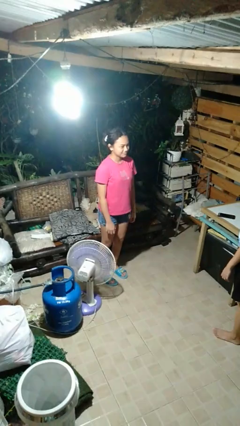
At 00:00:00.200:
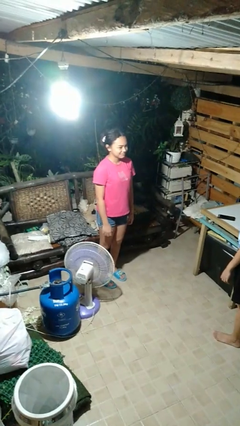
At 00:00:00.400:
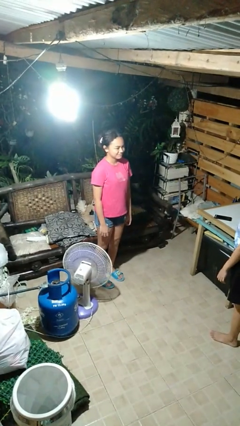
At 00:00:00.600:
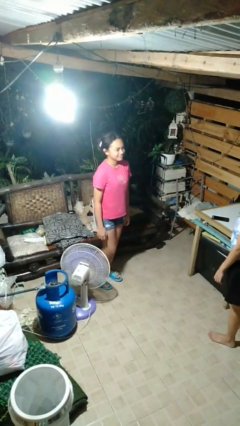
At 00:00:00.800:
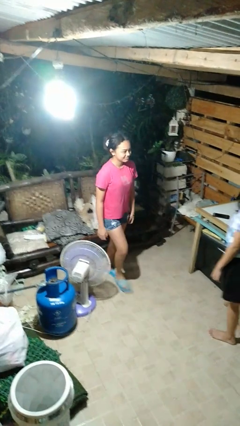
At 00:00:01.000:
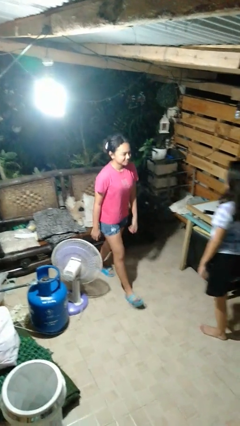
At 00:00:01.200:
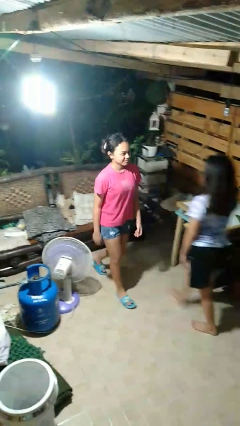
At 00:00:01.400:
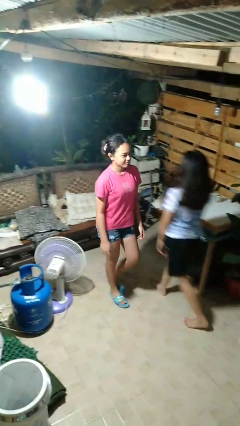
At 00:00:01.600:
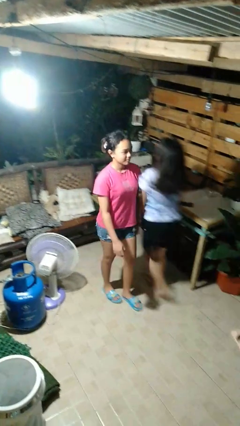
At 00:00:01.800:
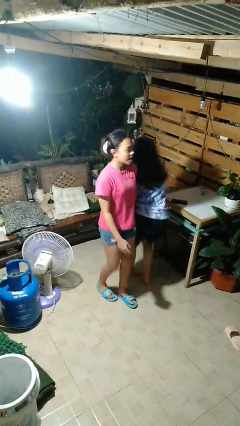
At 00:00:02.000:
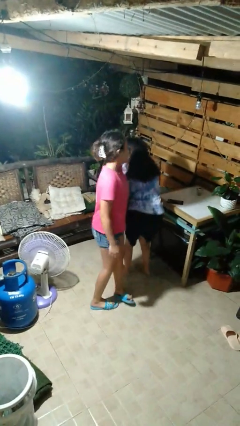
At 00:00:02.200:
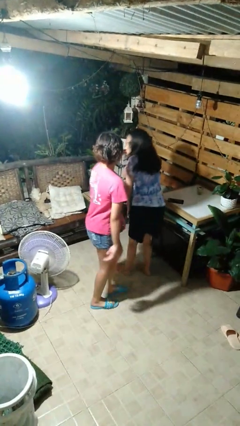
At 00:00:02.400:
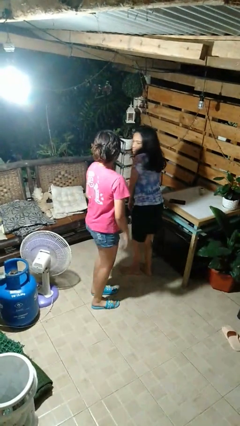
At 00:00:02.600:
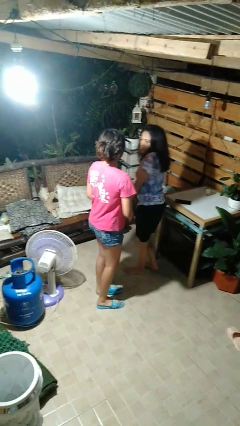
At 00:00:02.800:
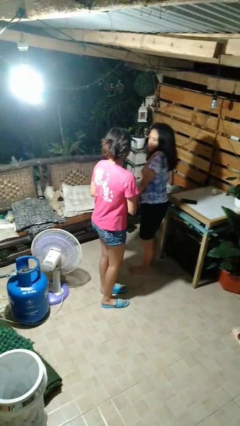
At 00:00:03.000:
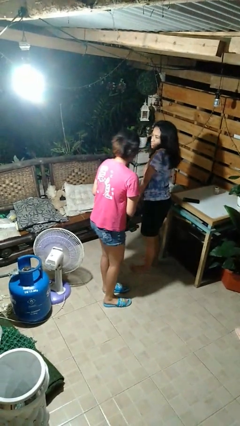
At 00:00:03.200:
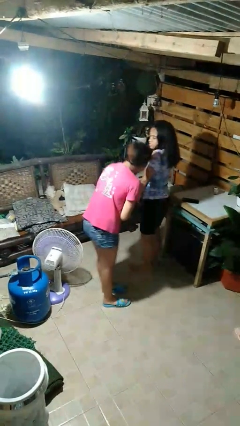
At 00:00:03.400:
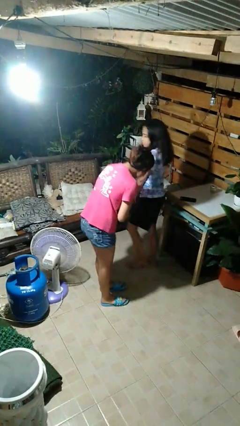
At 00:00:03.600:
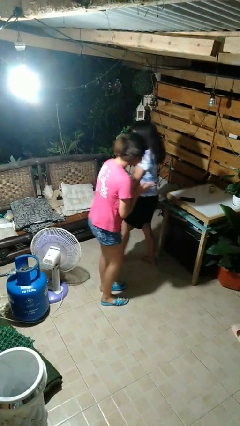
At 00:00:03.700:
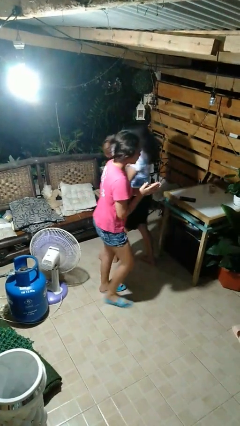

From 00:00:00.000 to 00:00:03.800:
person bumps into person

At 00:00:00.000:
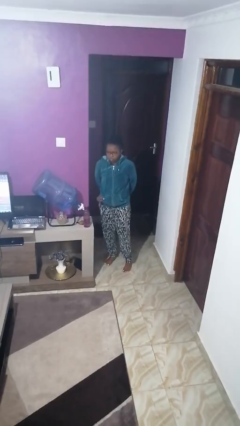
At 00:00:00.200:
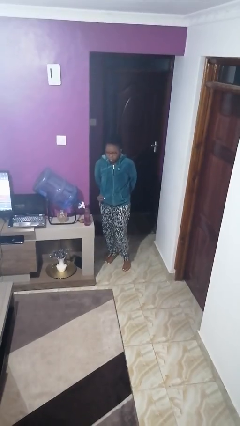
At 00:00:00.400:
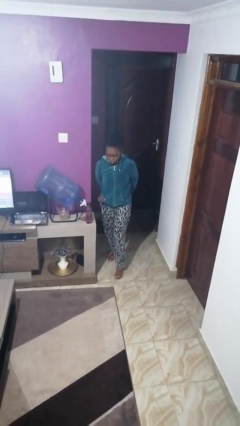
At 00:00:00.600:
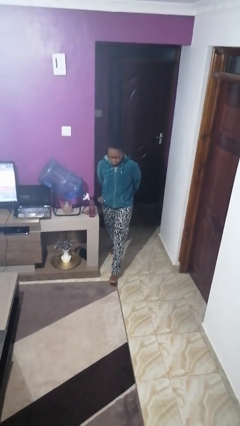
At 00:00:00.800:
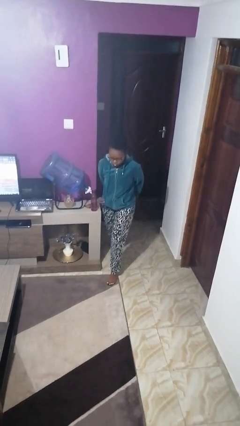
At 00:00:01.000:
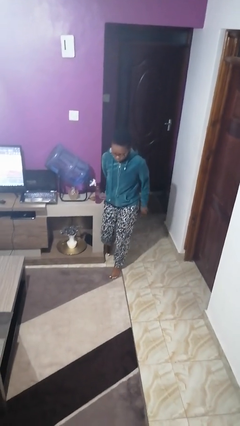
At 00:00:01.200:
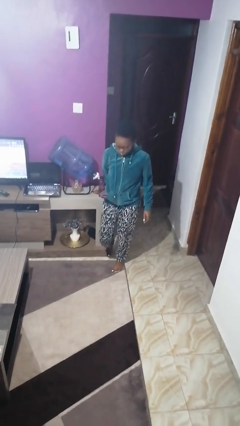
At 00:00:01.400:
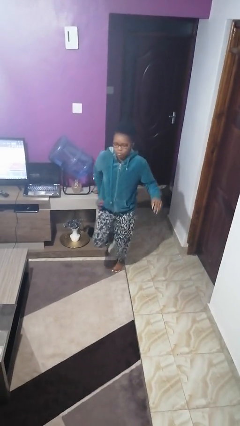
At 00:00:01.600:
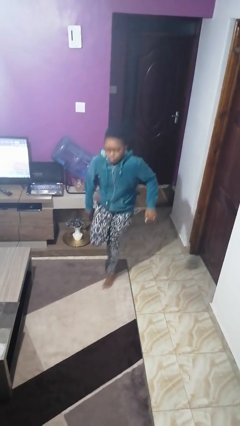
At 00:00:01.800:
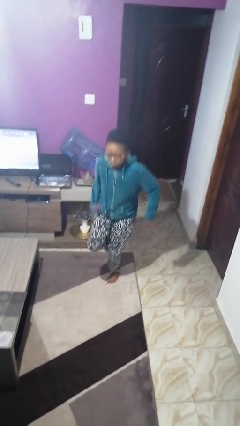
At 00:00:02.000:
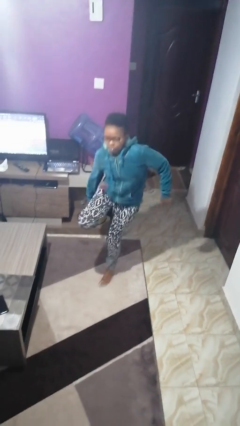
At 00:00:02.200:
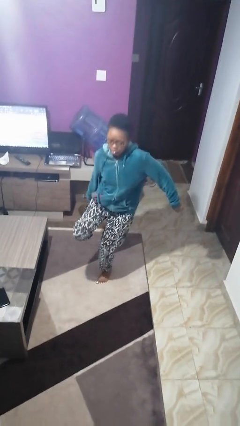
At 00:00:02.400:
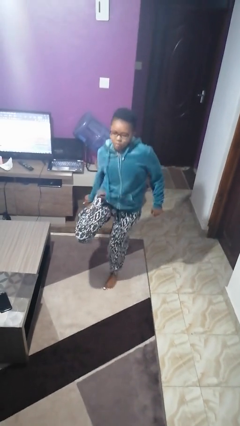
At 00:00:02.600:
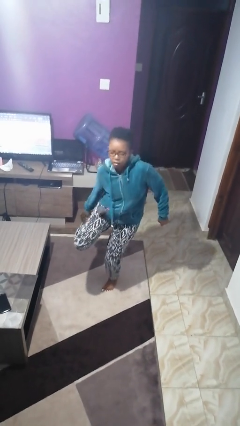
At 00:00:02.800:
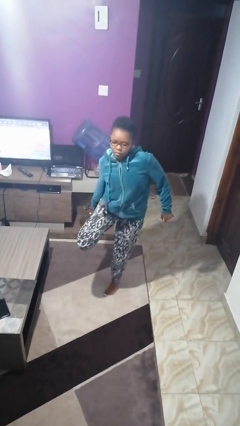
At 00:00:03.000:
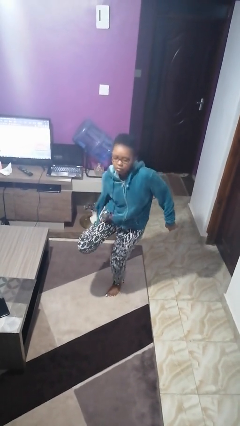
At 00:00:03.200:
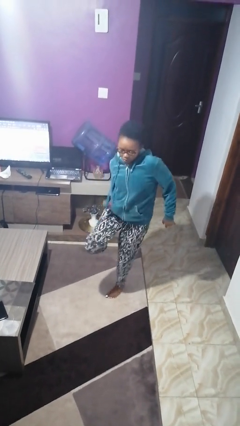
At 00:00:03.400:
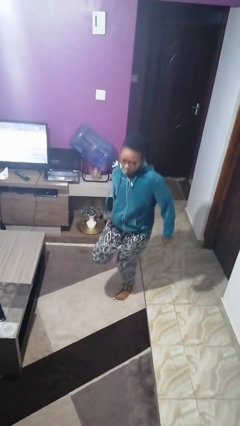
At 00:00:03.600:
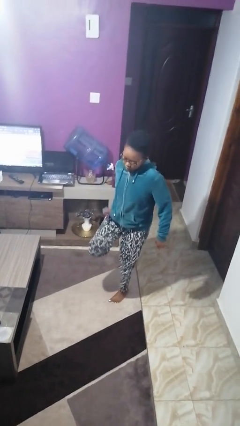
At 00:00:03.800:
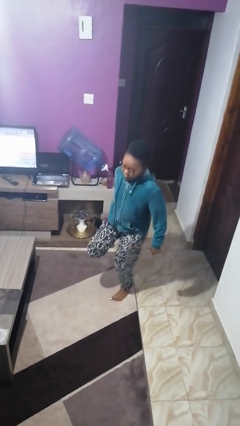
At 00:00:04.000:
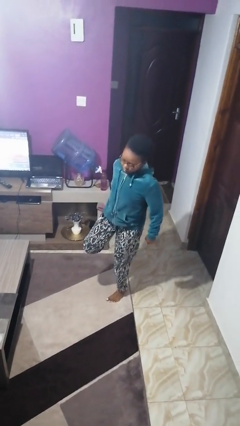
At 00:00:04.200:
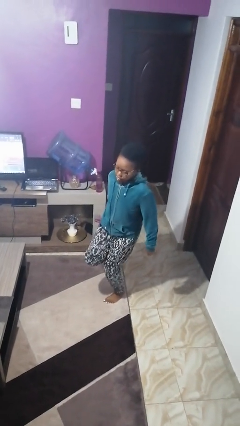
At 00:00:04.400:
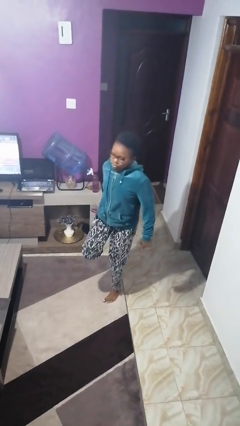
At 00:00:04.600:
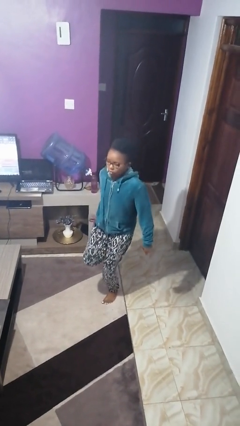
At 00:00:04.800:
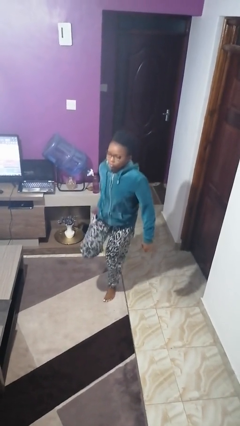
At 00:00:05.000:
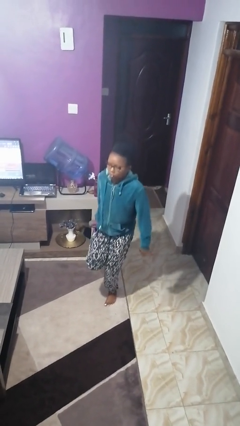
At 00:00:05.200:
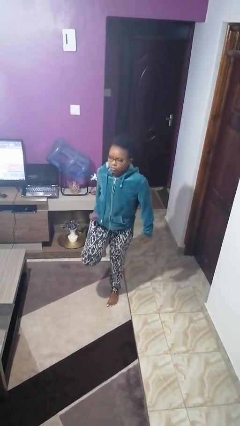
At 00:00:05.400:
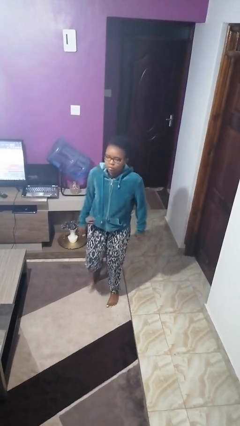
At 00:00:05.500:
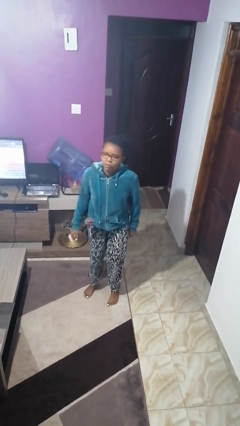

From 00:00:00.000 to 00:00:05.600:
person stubs toe

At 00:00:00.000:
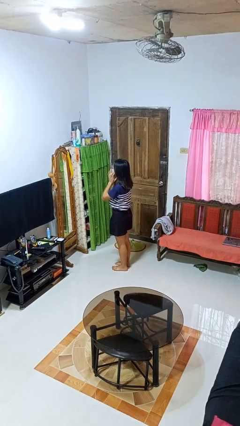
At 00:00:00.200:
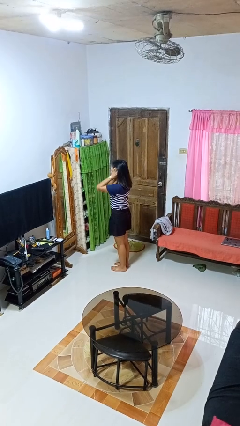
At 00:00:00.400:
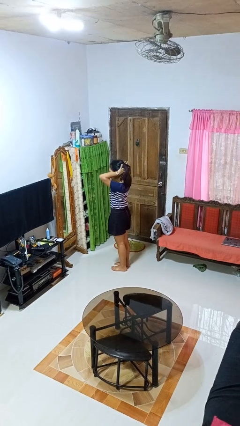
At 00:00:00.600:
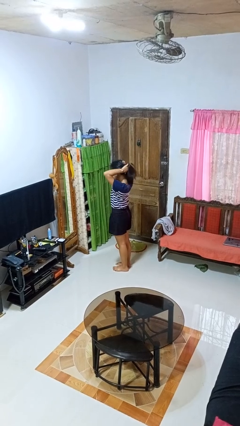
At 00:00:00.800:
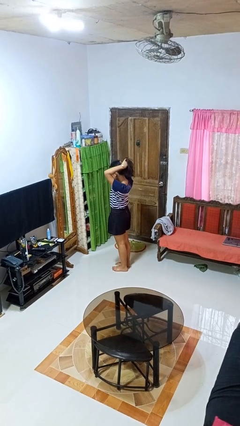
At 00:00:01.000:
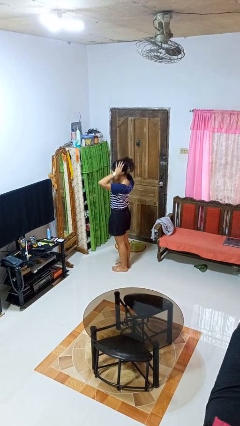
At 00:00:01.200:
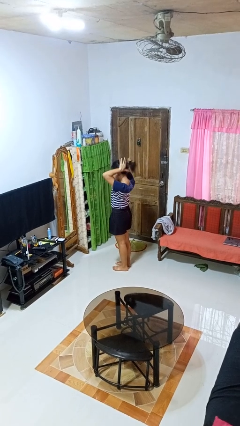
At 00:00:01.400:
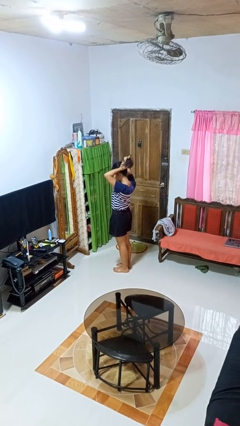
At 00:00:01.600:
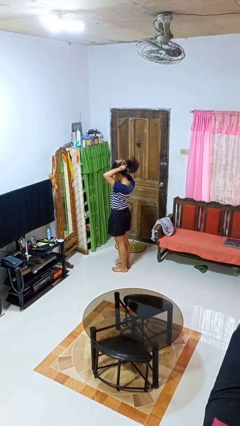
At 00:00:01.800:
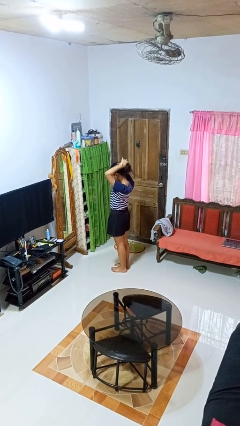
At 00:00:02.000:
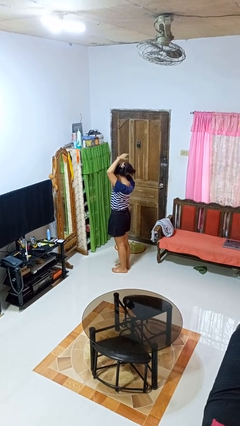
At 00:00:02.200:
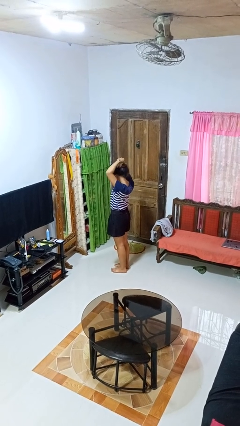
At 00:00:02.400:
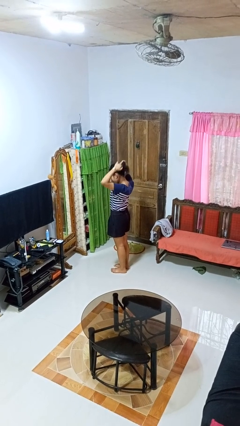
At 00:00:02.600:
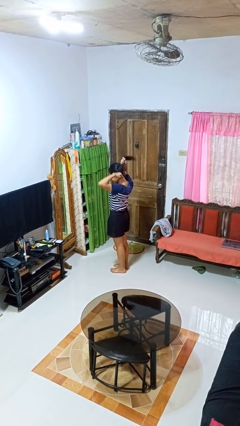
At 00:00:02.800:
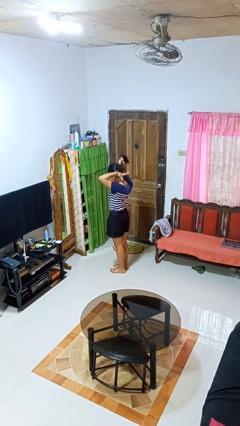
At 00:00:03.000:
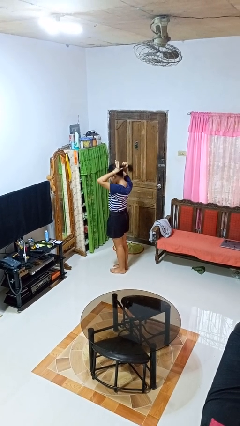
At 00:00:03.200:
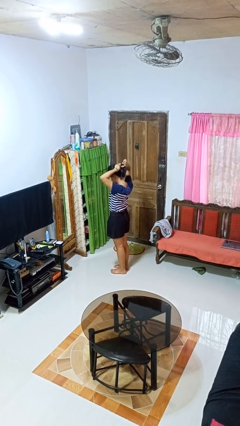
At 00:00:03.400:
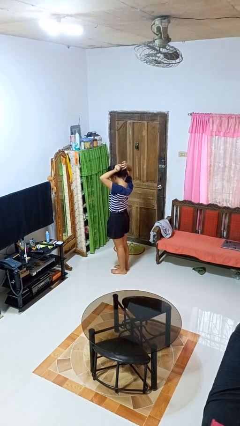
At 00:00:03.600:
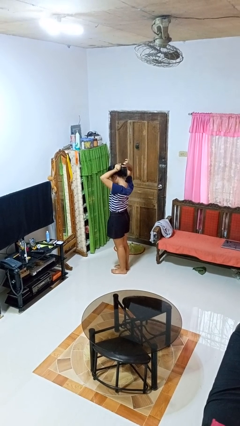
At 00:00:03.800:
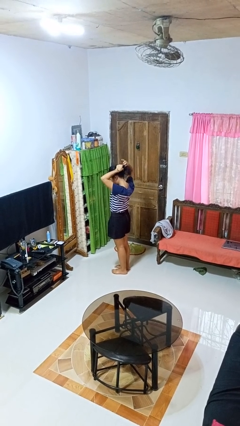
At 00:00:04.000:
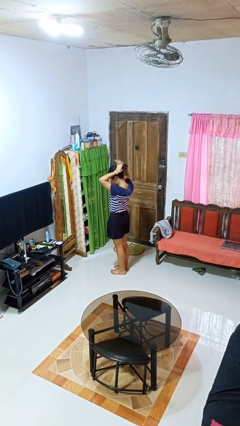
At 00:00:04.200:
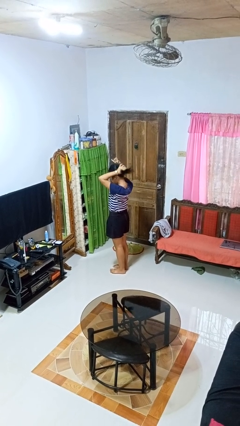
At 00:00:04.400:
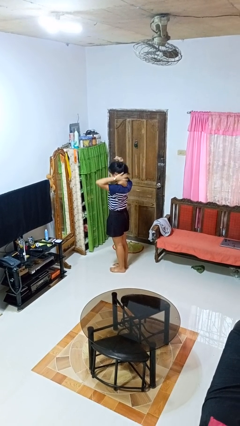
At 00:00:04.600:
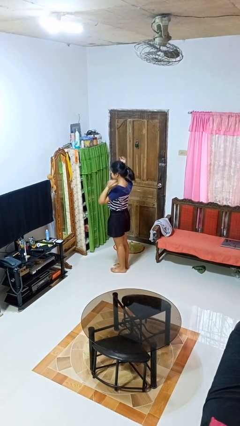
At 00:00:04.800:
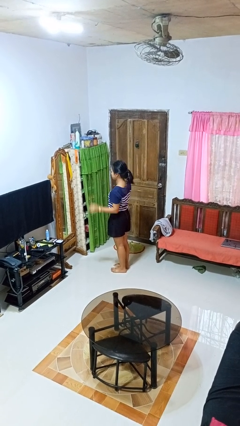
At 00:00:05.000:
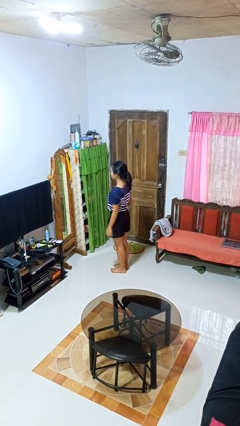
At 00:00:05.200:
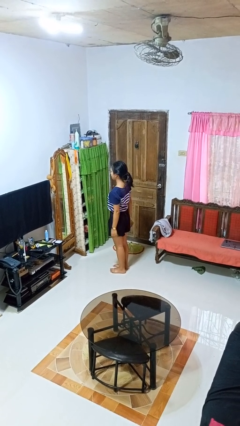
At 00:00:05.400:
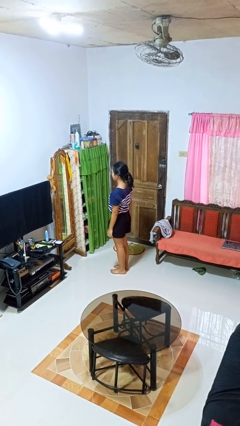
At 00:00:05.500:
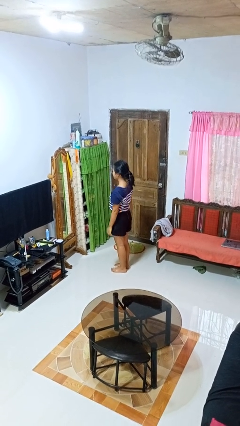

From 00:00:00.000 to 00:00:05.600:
person puts hair in ponytail

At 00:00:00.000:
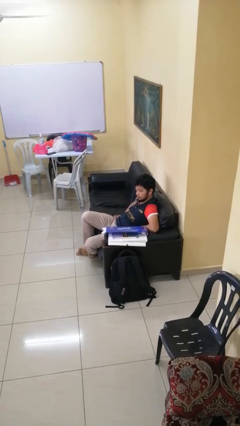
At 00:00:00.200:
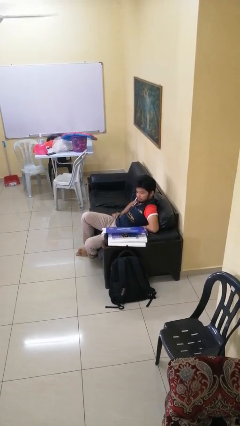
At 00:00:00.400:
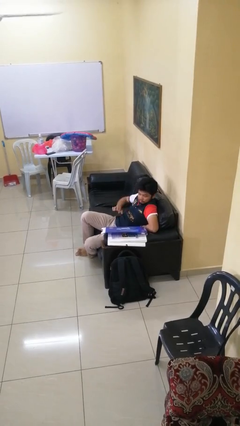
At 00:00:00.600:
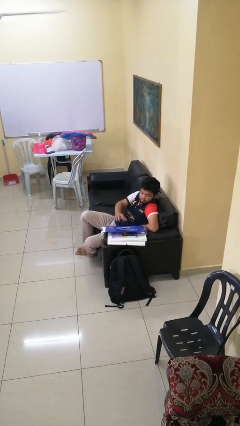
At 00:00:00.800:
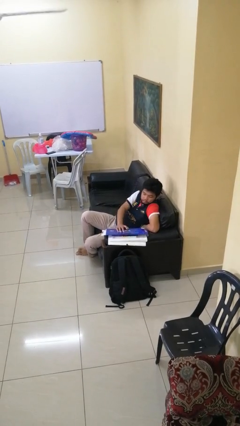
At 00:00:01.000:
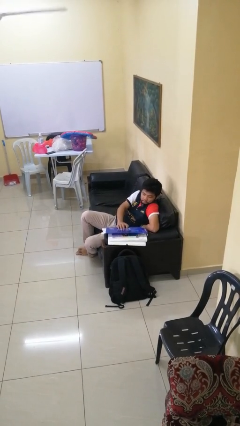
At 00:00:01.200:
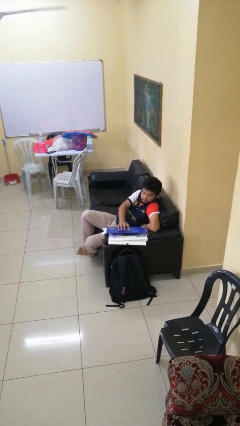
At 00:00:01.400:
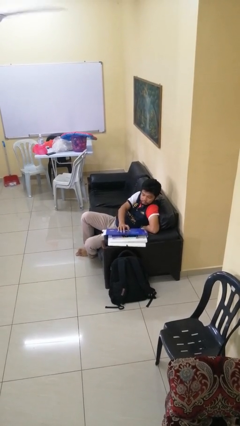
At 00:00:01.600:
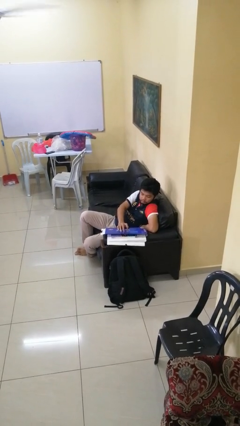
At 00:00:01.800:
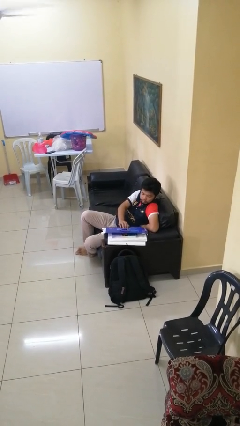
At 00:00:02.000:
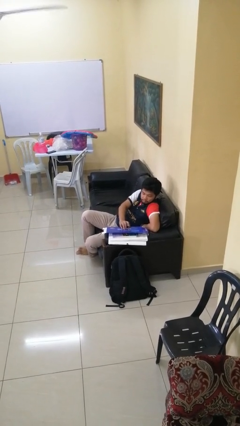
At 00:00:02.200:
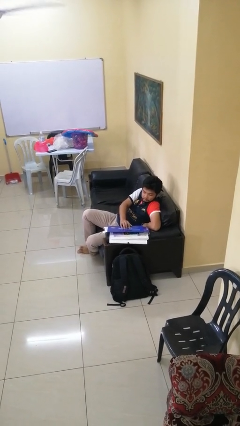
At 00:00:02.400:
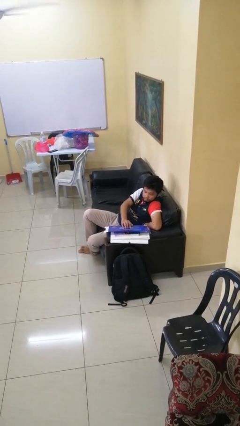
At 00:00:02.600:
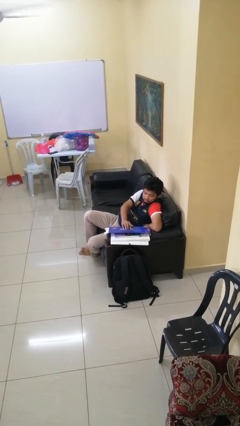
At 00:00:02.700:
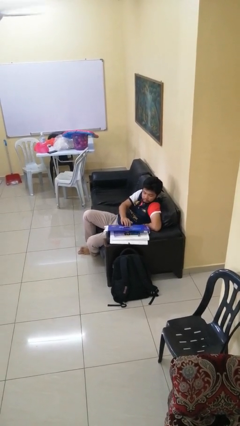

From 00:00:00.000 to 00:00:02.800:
person taps object with finger
